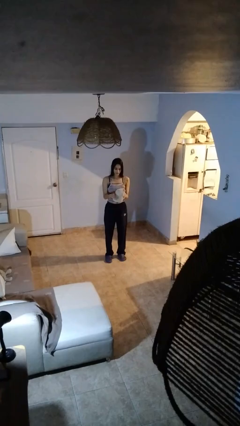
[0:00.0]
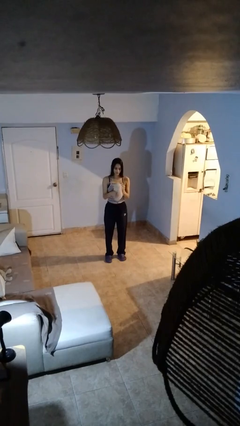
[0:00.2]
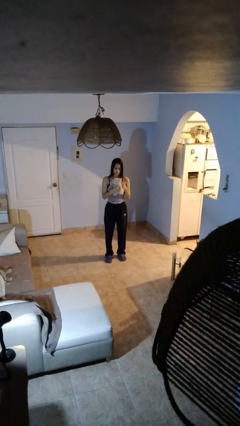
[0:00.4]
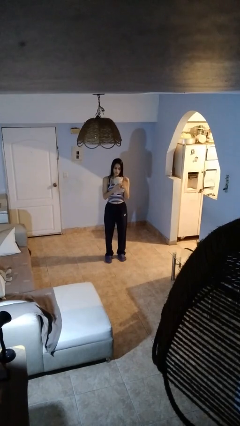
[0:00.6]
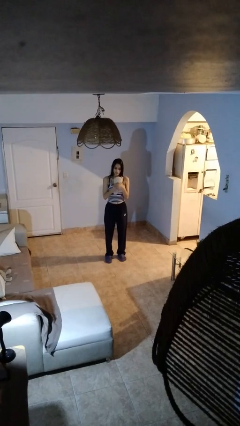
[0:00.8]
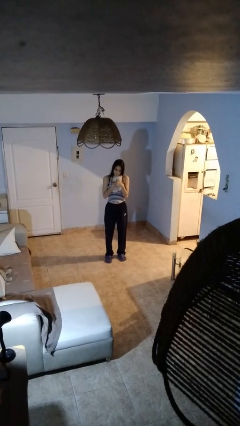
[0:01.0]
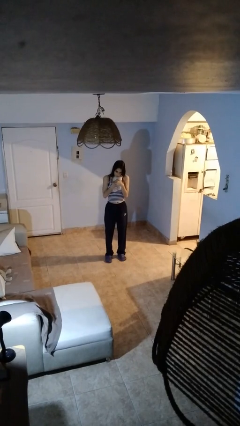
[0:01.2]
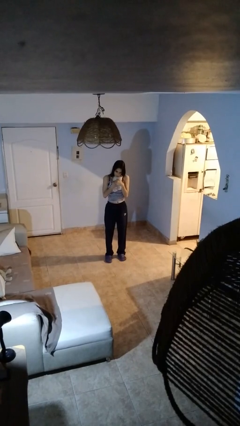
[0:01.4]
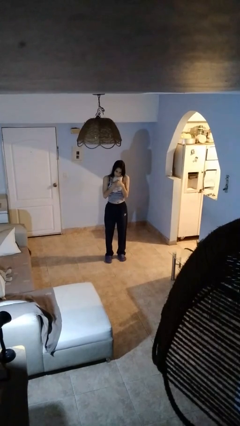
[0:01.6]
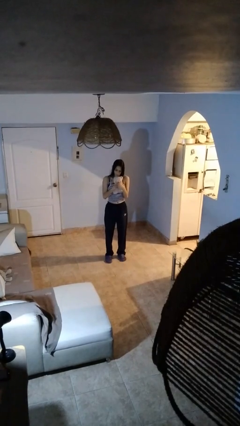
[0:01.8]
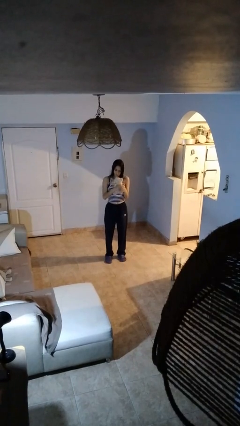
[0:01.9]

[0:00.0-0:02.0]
person hugs stuffed animal

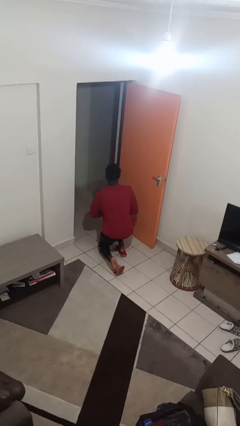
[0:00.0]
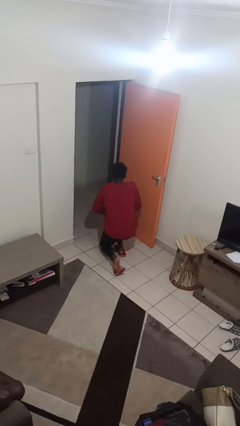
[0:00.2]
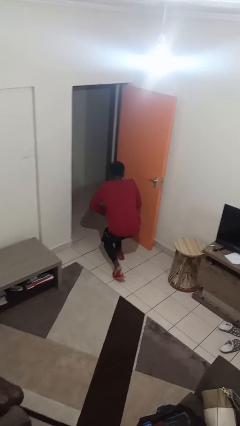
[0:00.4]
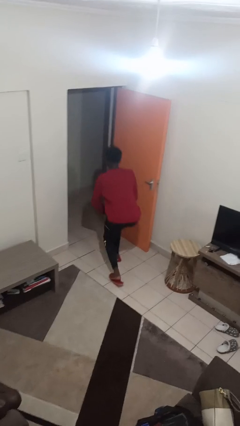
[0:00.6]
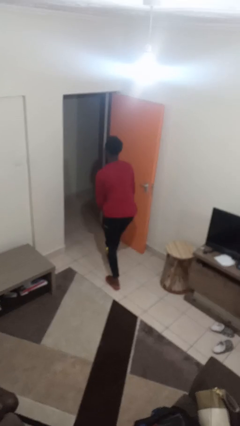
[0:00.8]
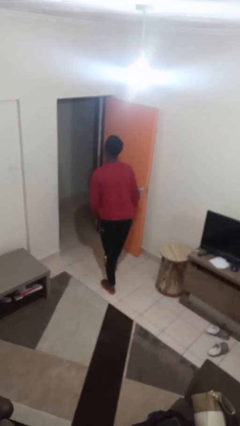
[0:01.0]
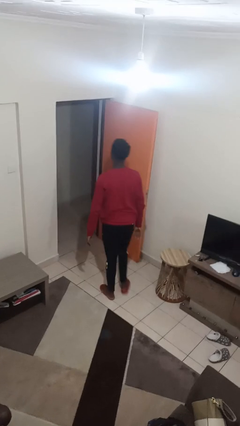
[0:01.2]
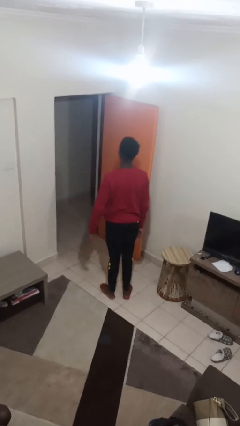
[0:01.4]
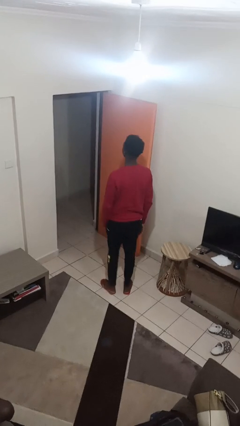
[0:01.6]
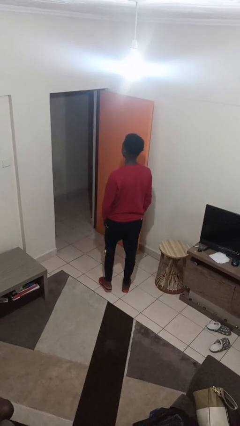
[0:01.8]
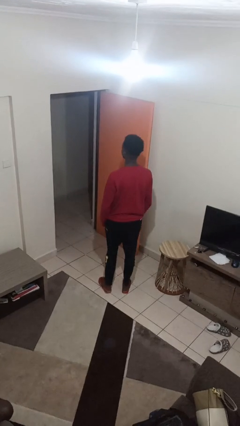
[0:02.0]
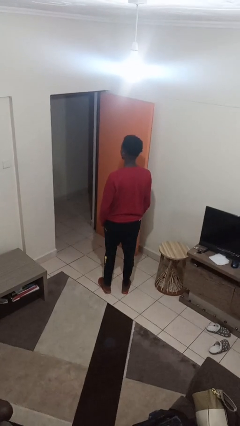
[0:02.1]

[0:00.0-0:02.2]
person stands up from floor

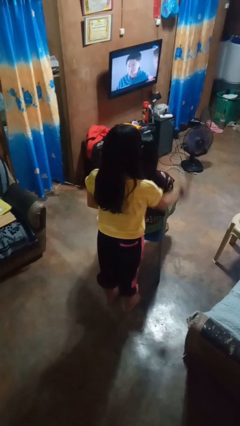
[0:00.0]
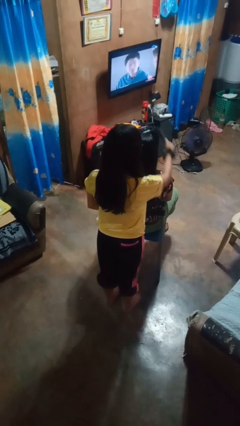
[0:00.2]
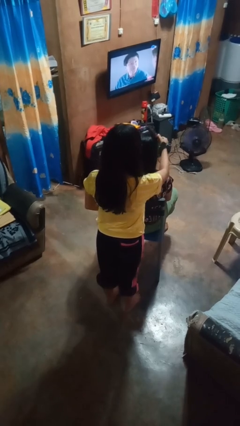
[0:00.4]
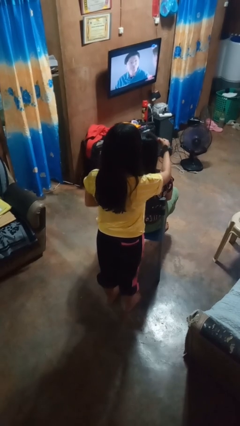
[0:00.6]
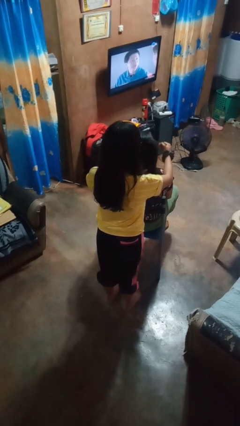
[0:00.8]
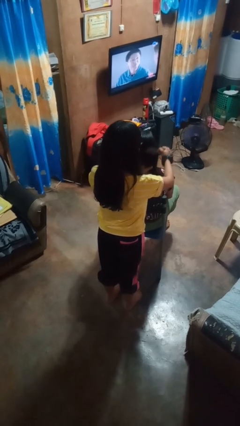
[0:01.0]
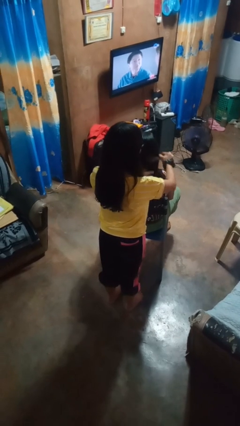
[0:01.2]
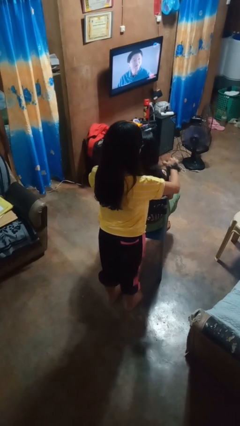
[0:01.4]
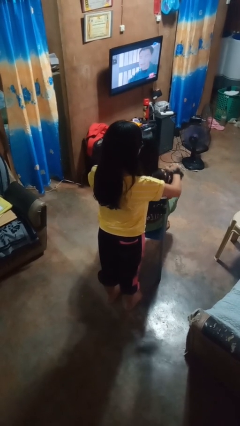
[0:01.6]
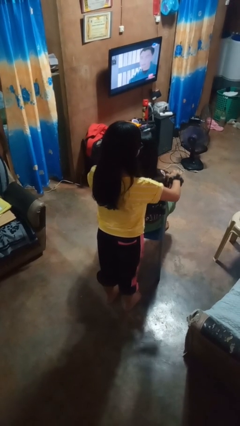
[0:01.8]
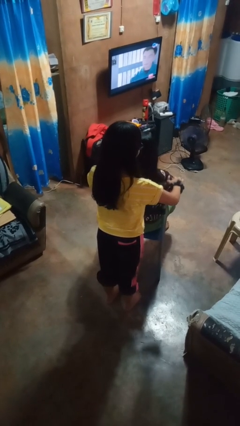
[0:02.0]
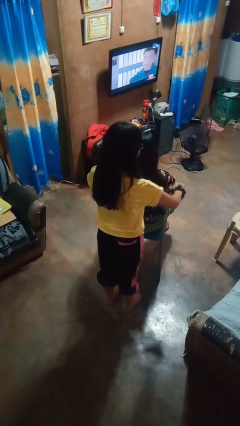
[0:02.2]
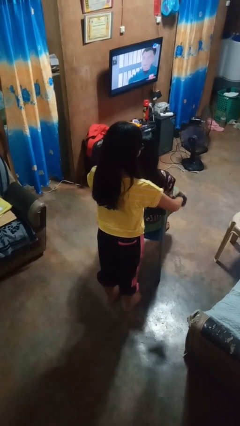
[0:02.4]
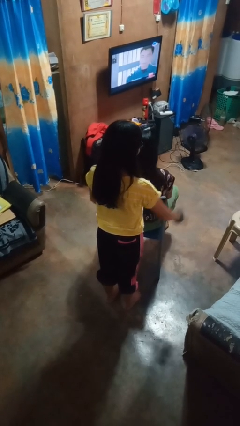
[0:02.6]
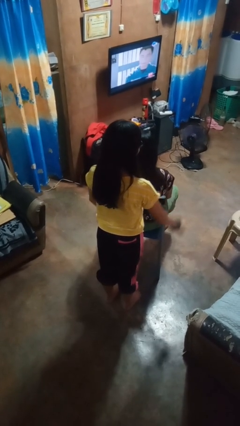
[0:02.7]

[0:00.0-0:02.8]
person brushes hair of person

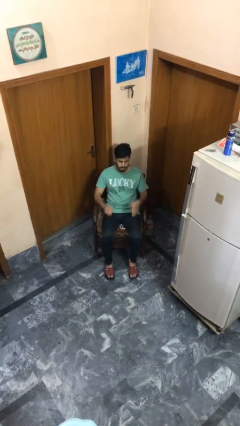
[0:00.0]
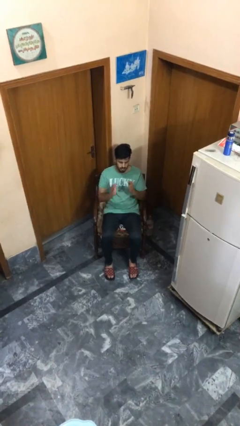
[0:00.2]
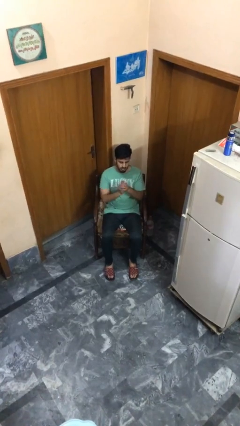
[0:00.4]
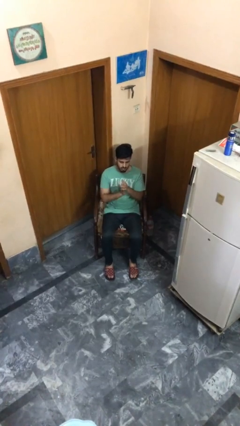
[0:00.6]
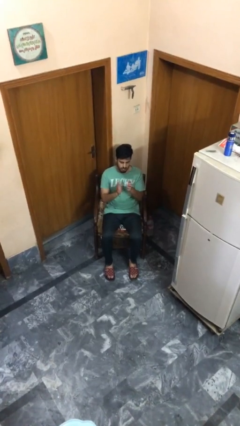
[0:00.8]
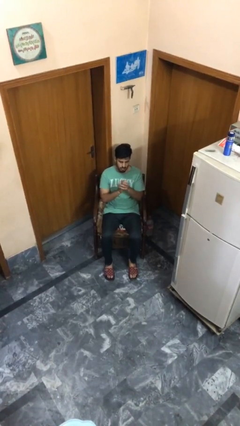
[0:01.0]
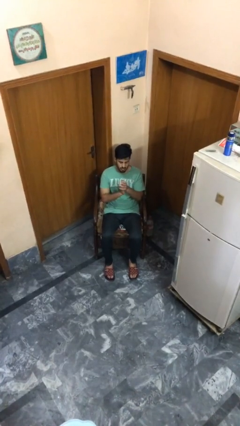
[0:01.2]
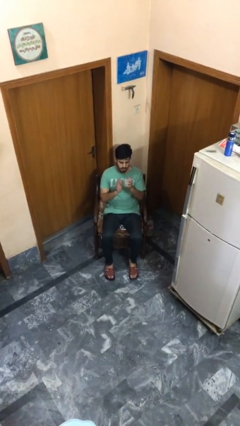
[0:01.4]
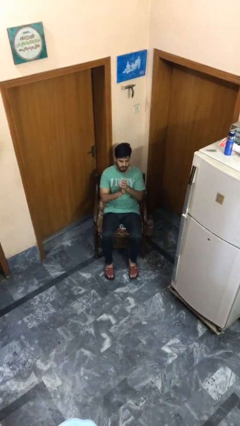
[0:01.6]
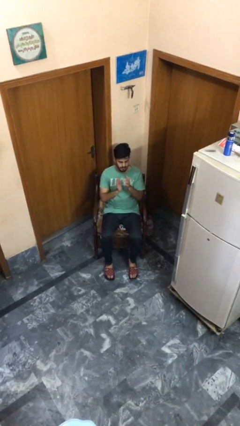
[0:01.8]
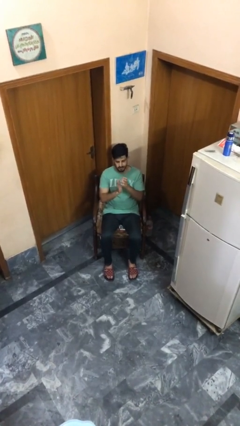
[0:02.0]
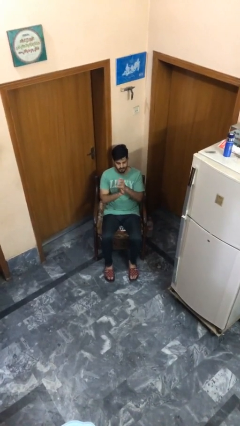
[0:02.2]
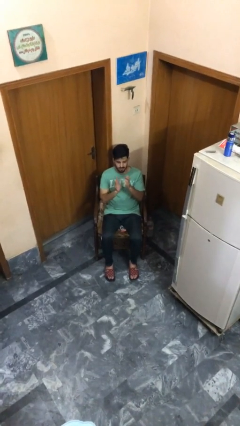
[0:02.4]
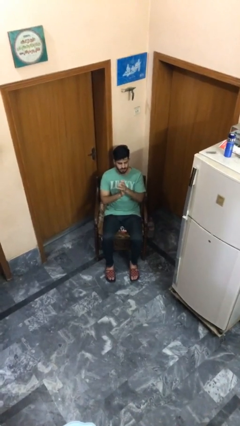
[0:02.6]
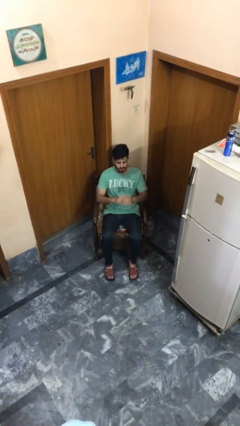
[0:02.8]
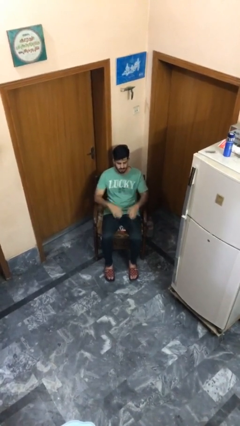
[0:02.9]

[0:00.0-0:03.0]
person claps hands

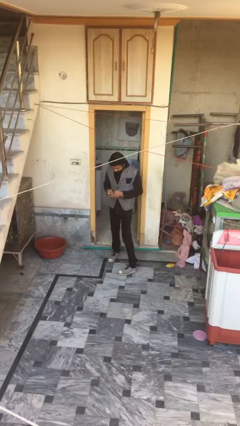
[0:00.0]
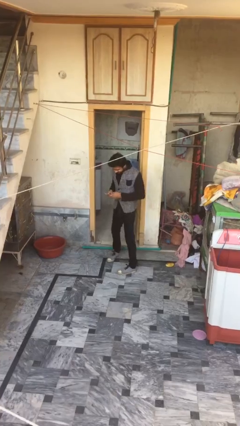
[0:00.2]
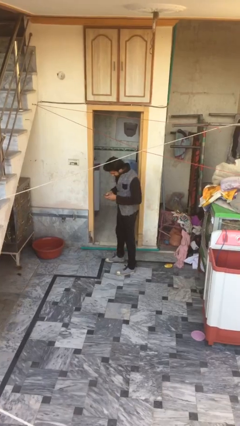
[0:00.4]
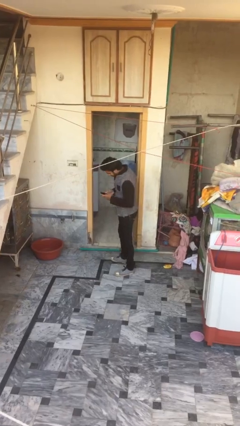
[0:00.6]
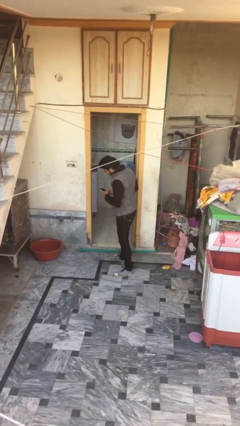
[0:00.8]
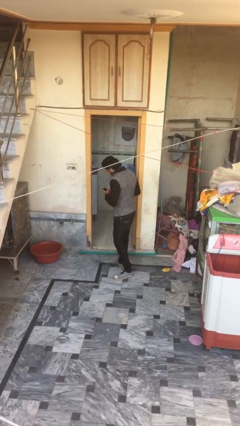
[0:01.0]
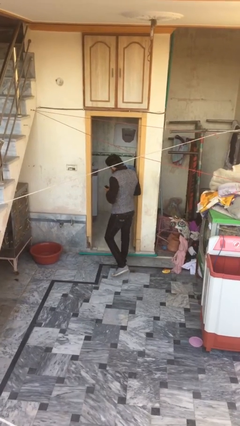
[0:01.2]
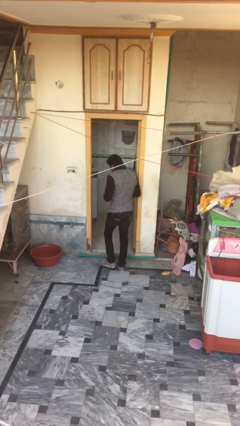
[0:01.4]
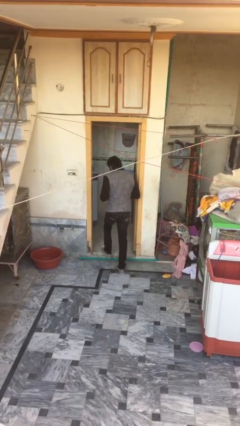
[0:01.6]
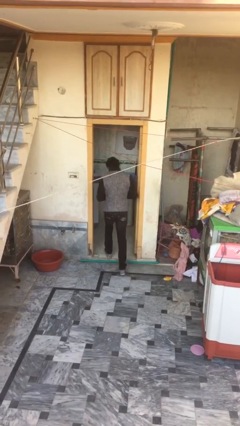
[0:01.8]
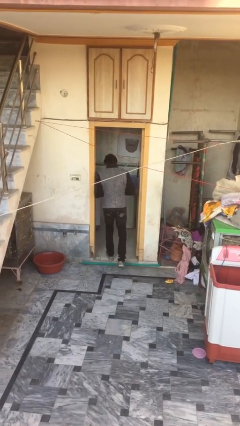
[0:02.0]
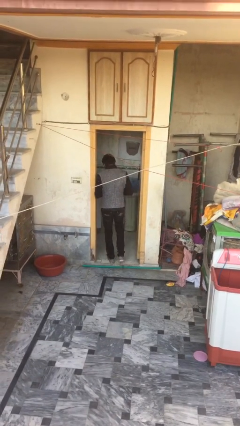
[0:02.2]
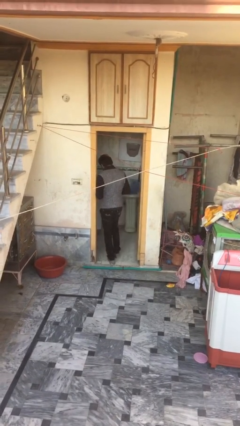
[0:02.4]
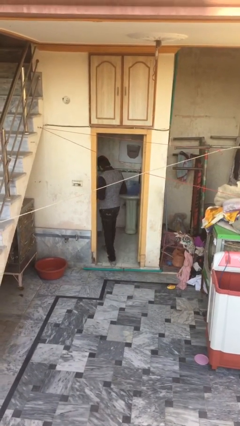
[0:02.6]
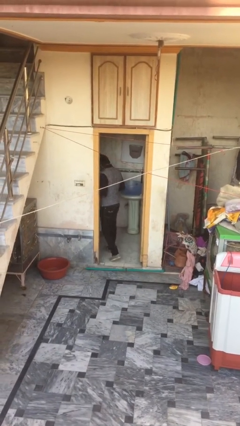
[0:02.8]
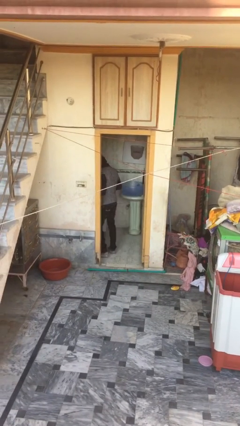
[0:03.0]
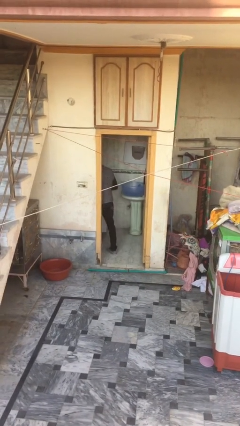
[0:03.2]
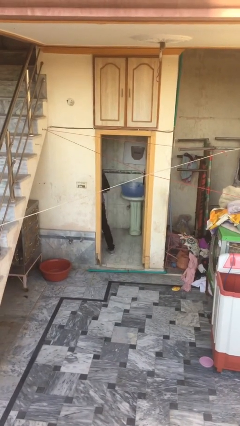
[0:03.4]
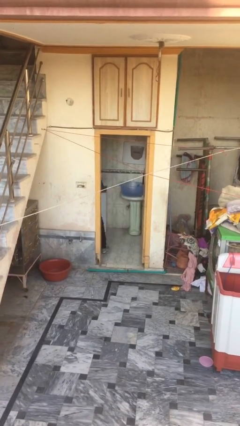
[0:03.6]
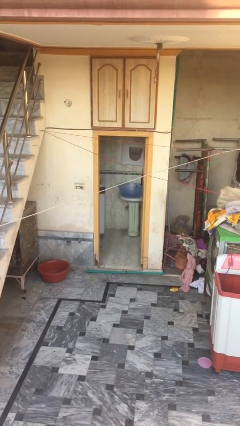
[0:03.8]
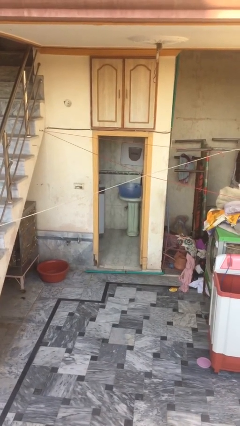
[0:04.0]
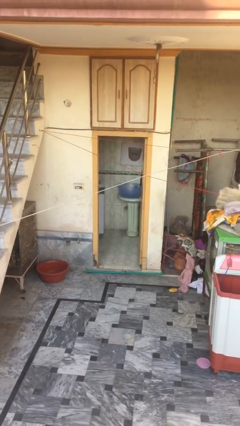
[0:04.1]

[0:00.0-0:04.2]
person exits scene through structure

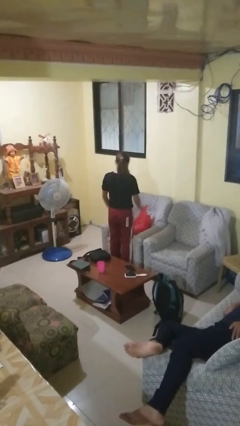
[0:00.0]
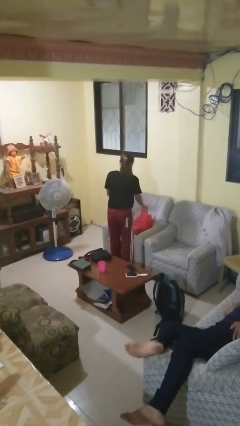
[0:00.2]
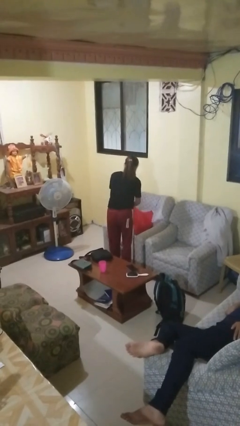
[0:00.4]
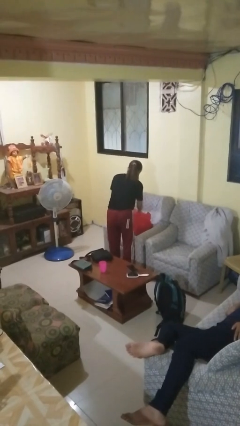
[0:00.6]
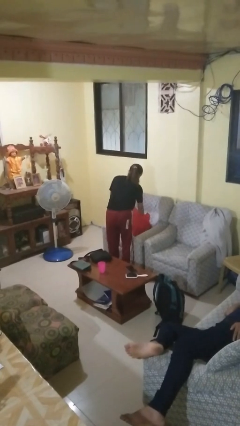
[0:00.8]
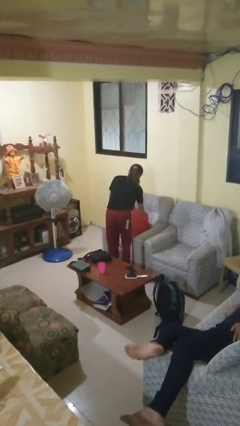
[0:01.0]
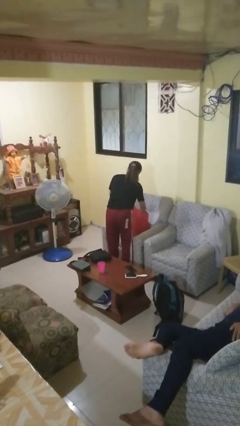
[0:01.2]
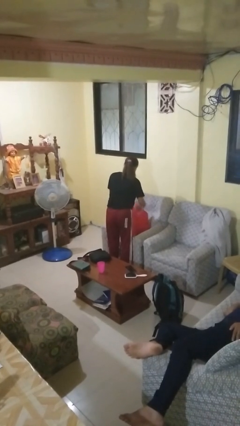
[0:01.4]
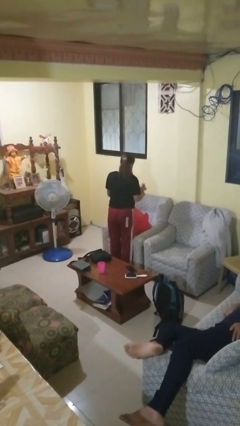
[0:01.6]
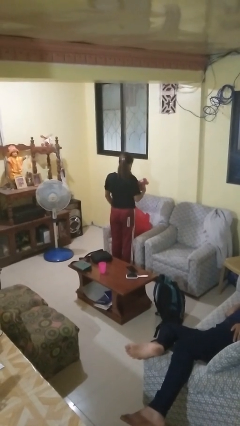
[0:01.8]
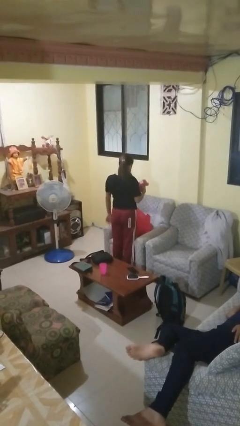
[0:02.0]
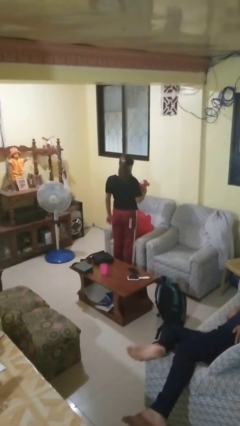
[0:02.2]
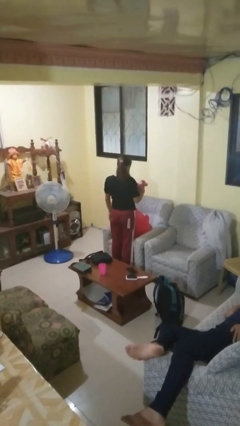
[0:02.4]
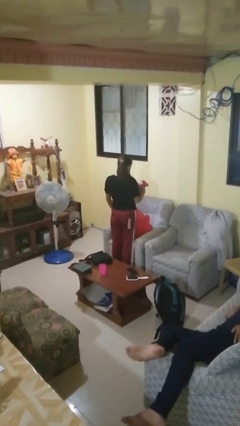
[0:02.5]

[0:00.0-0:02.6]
person takes object from bag

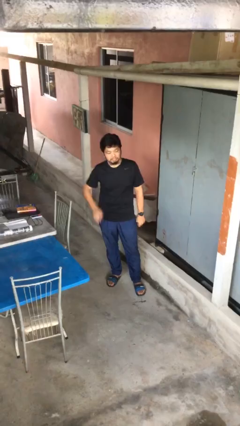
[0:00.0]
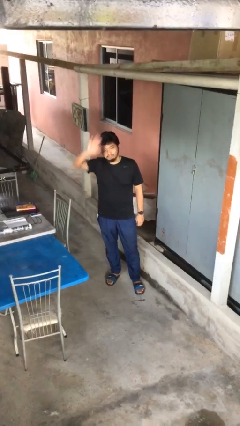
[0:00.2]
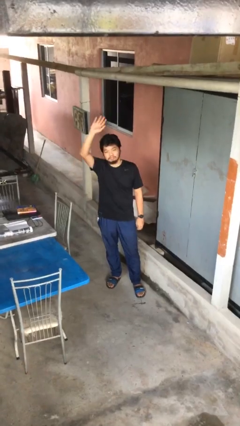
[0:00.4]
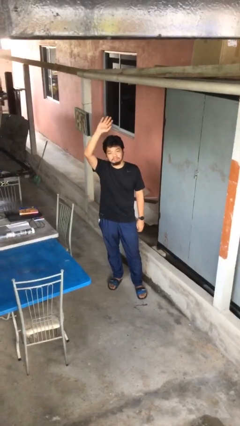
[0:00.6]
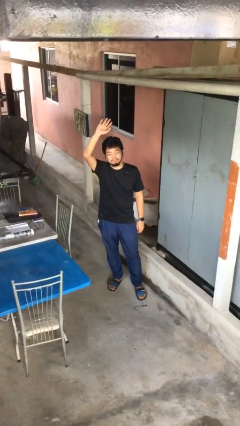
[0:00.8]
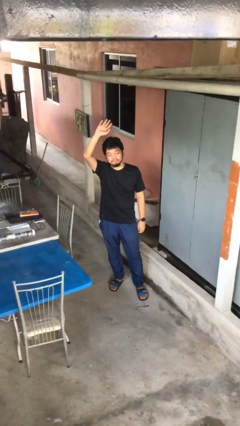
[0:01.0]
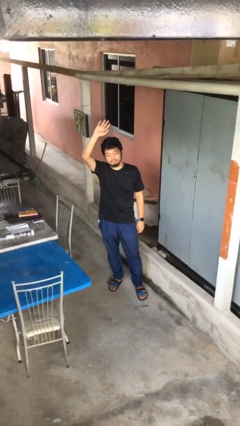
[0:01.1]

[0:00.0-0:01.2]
person gestures raise hand
